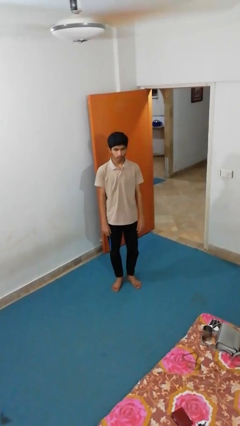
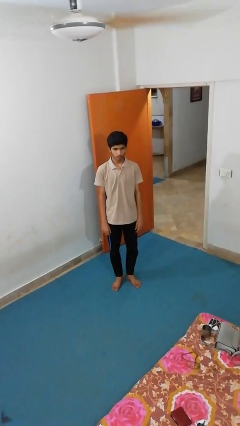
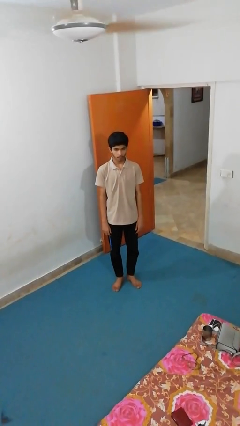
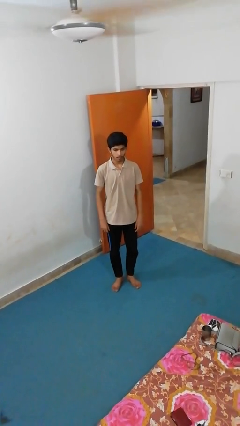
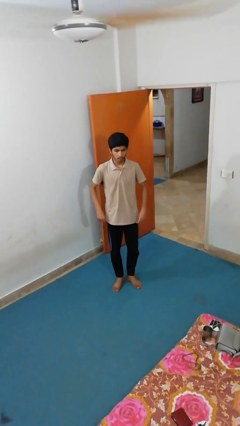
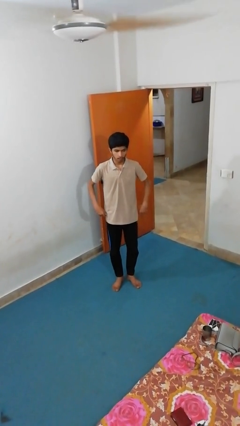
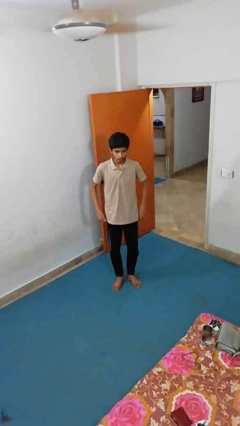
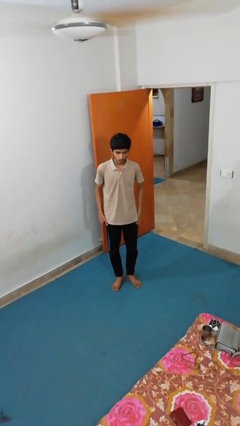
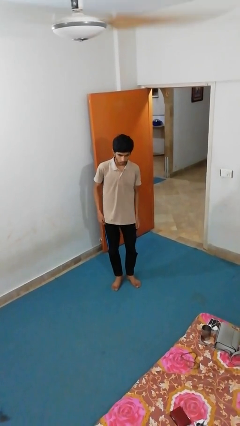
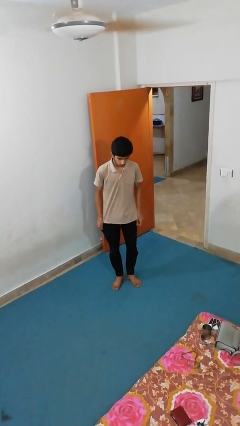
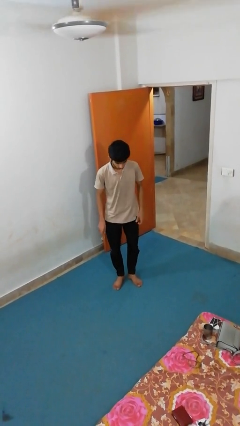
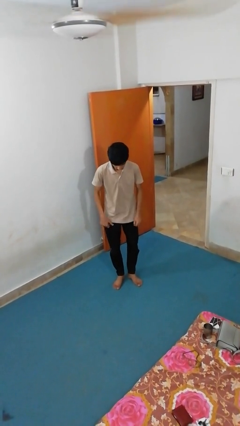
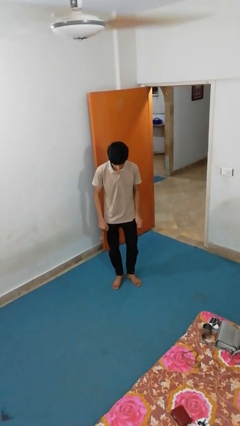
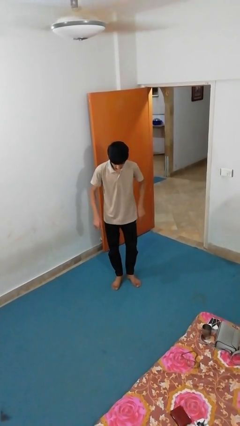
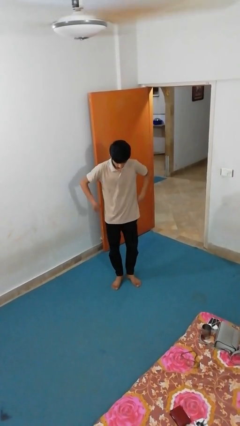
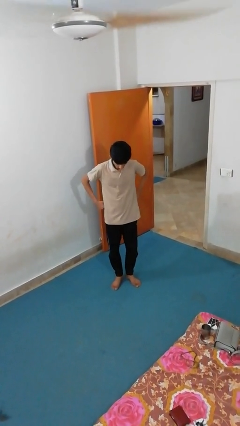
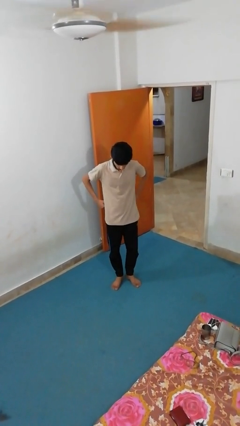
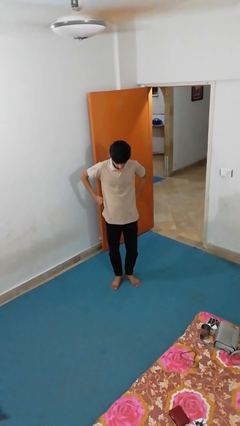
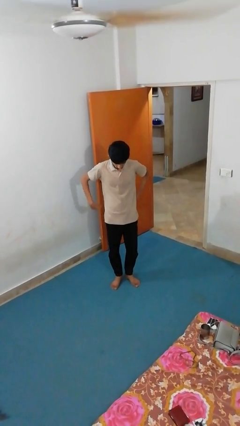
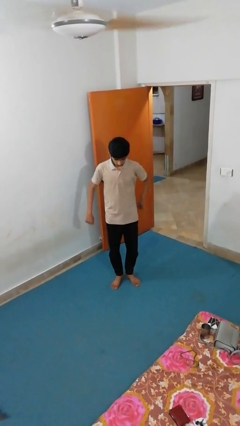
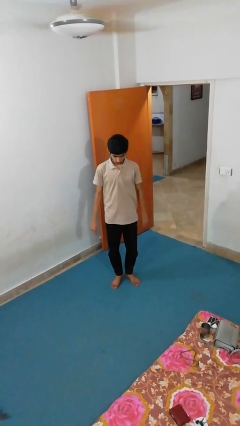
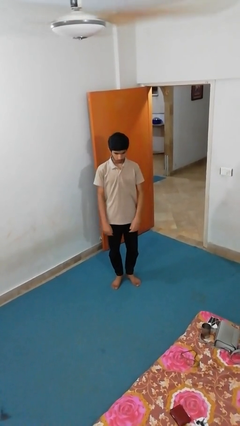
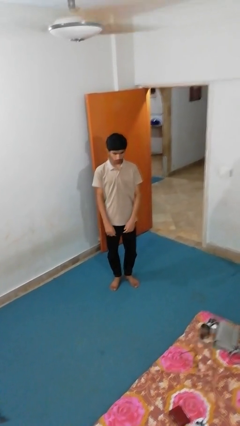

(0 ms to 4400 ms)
person hikes up pants

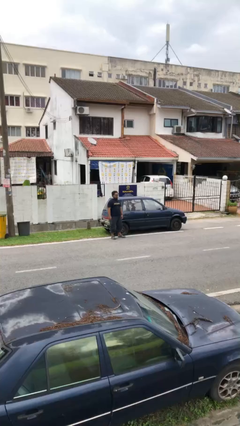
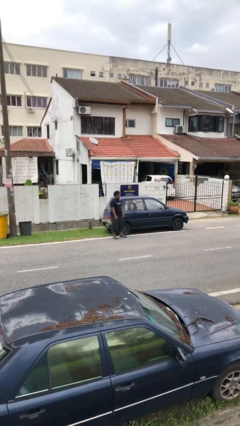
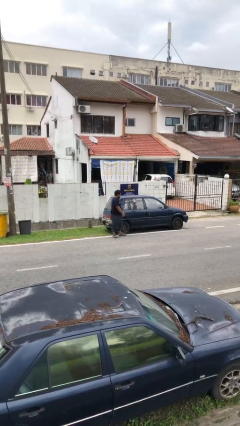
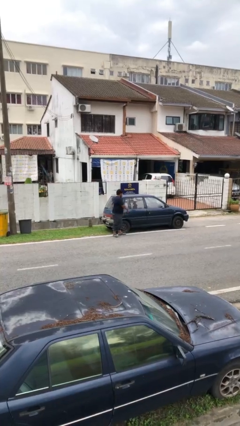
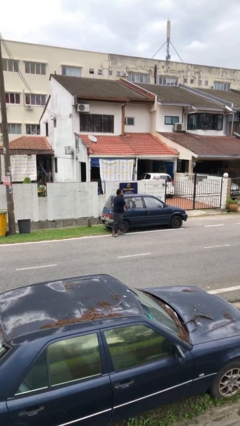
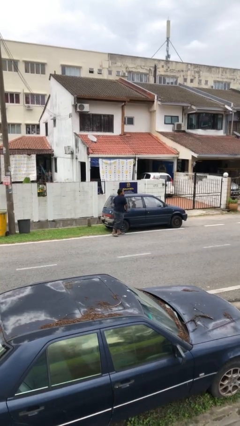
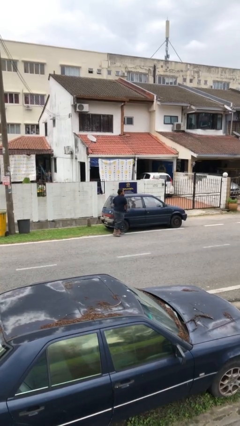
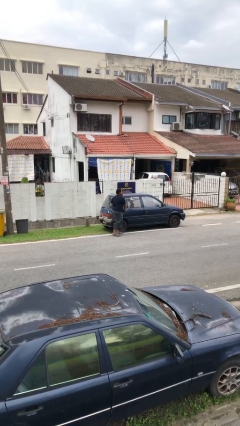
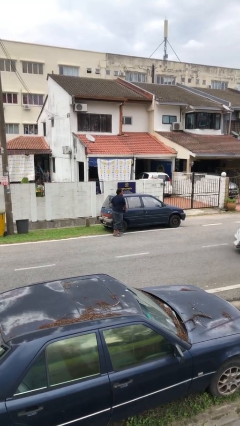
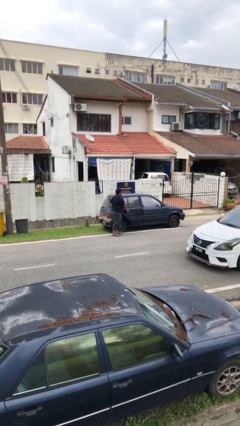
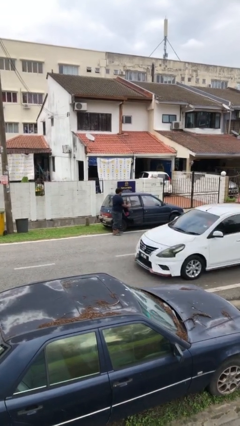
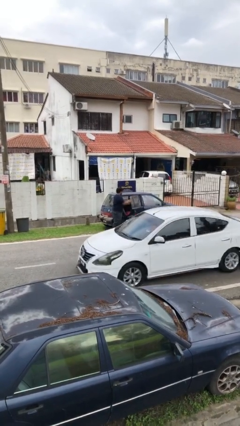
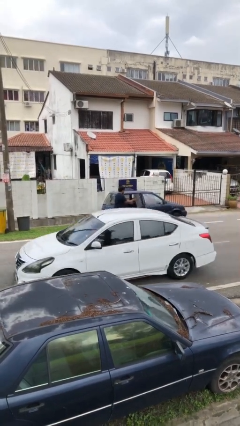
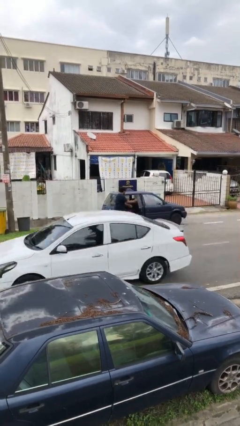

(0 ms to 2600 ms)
person opens car door

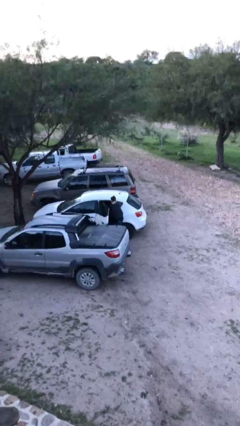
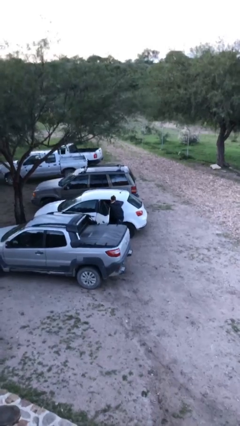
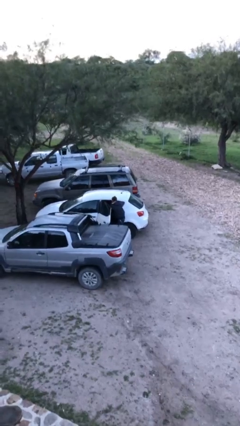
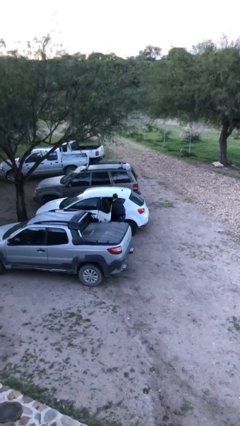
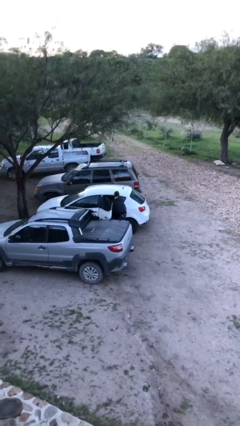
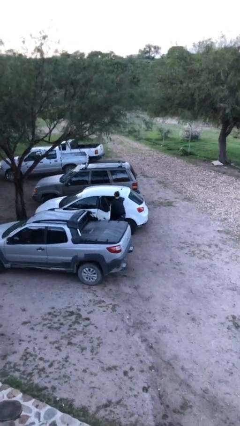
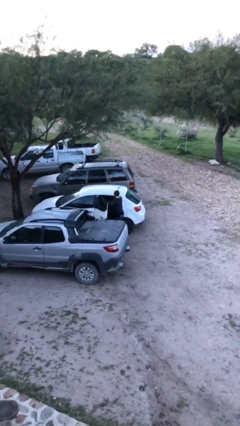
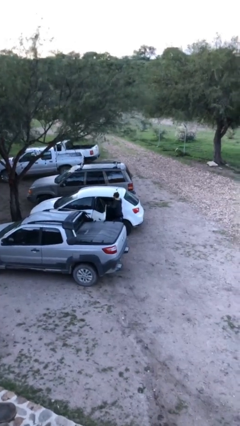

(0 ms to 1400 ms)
person unloads car

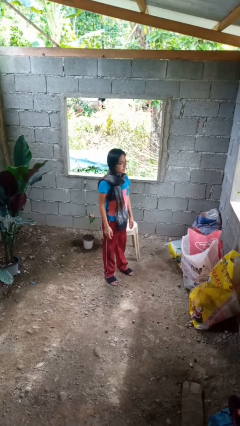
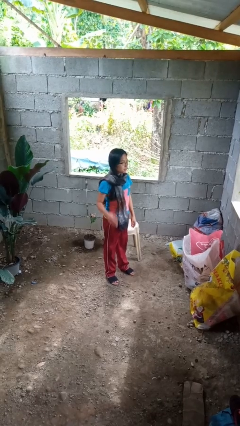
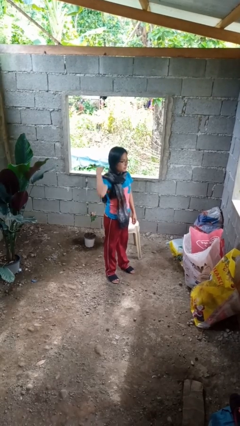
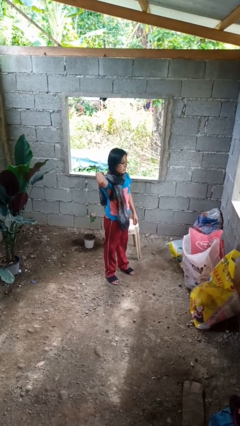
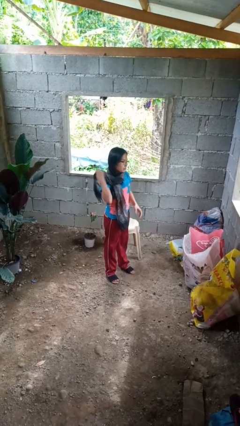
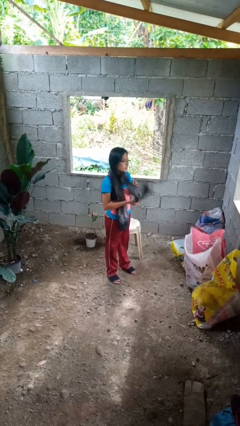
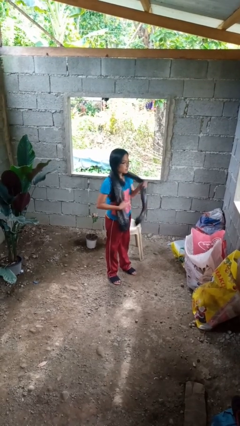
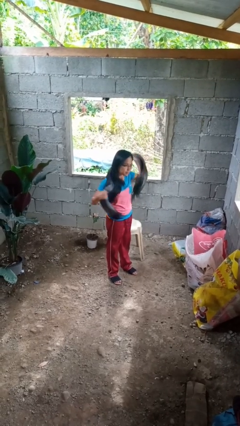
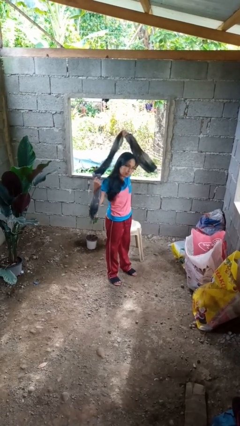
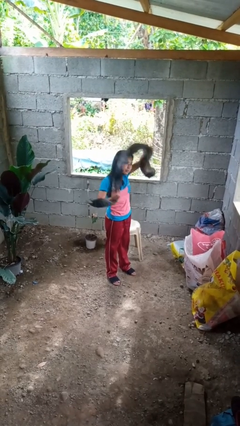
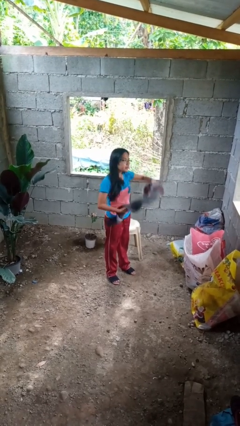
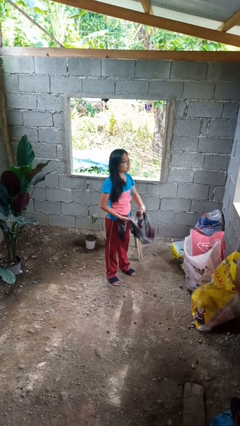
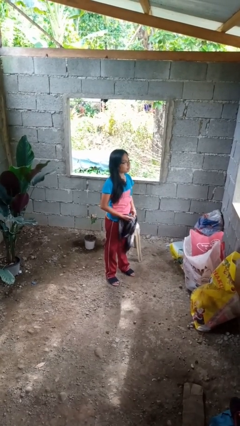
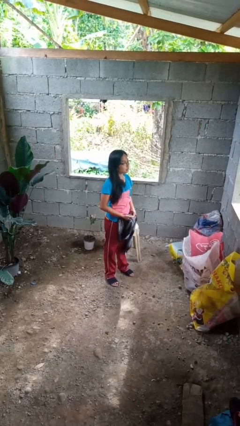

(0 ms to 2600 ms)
person takes off scarf

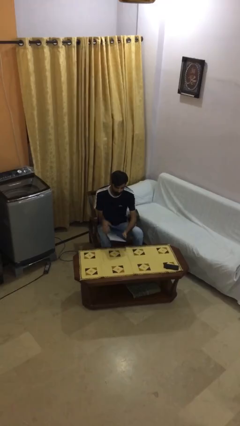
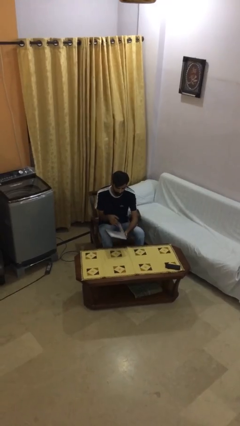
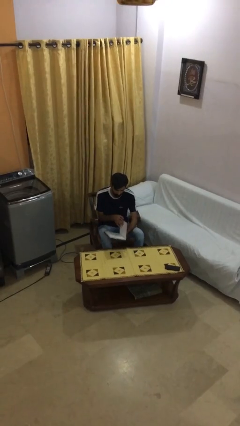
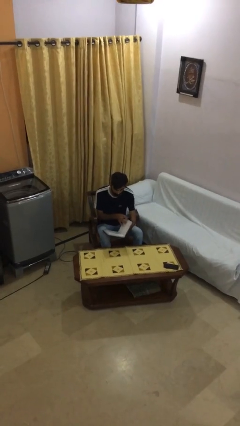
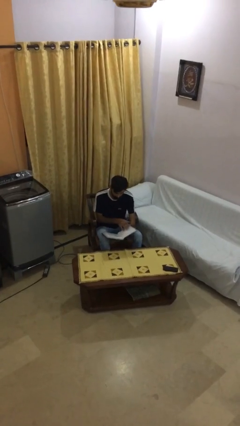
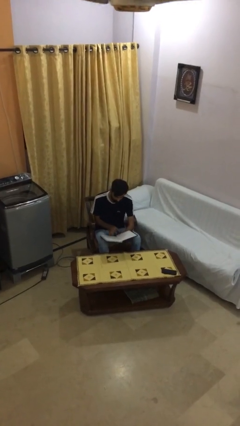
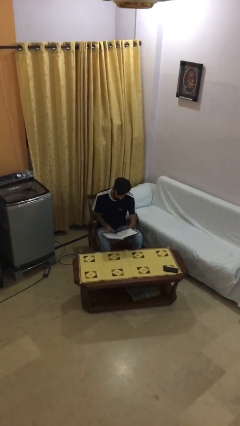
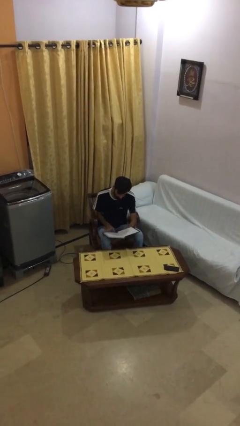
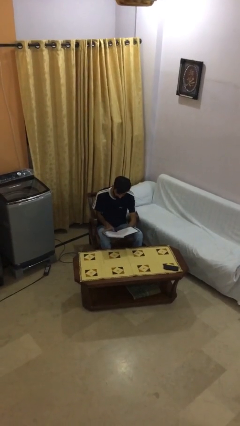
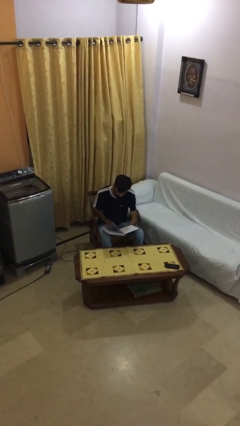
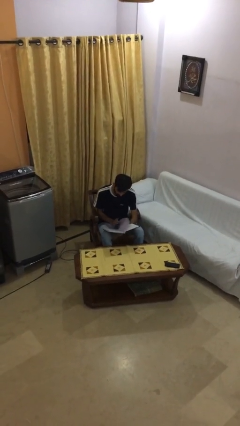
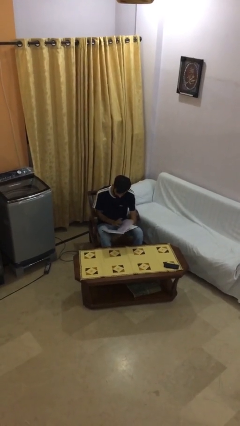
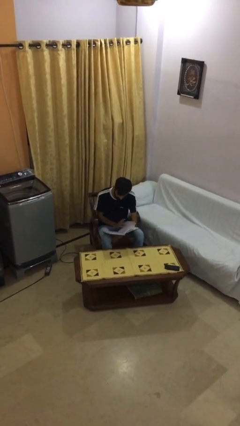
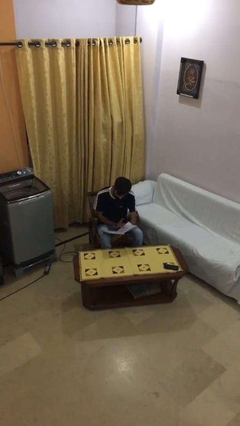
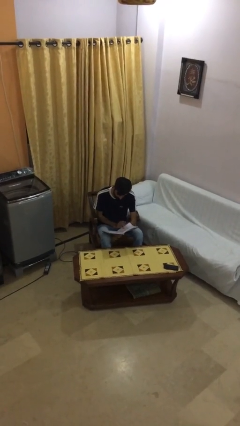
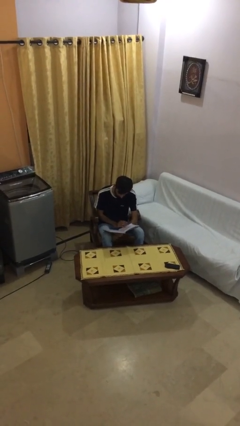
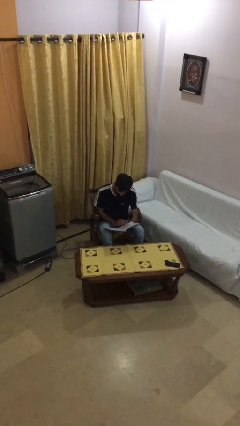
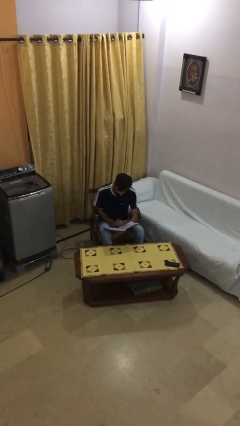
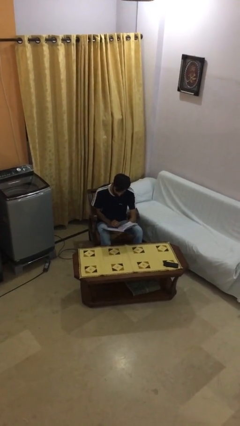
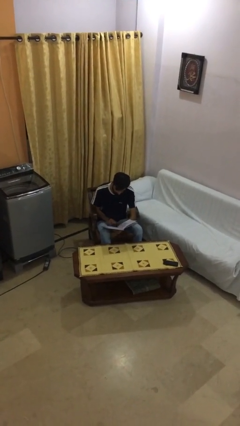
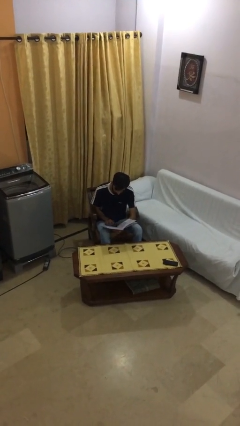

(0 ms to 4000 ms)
person reads document

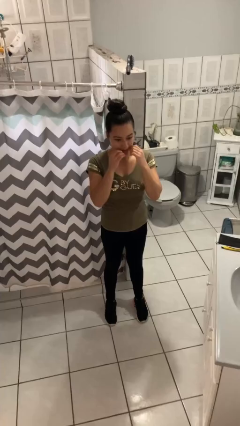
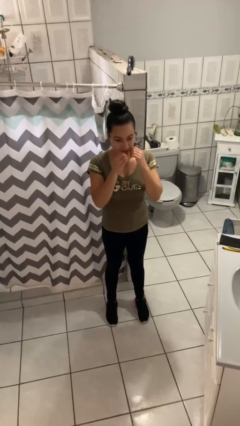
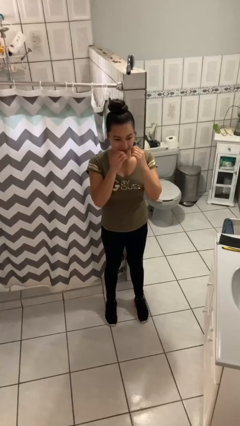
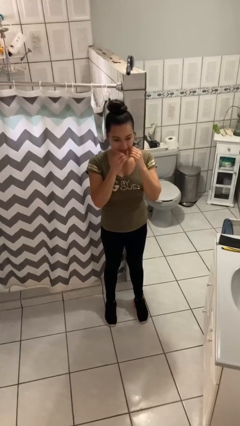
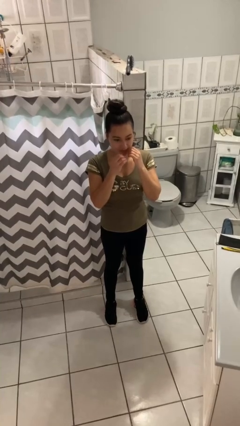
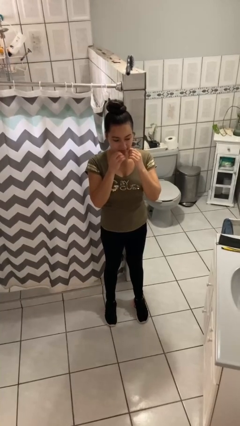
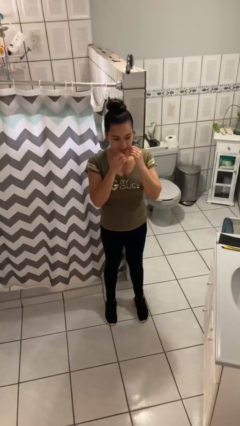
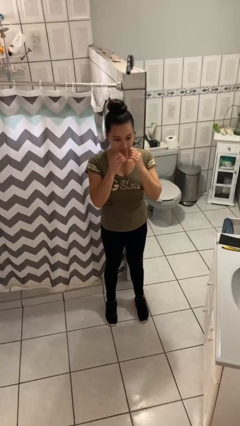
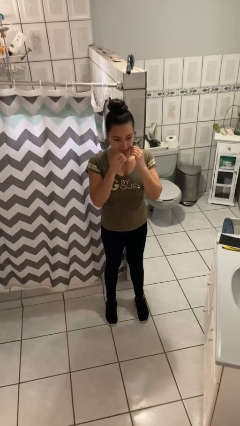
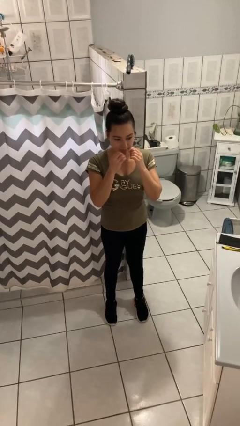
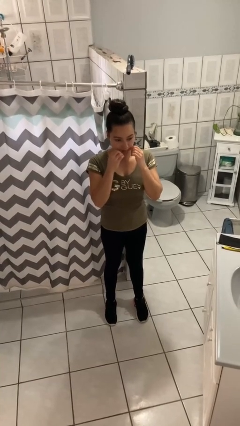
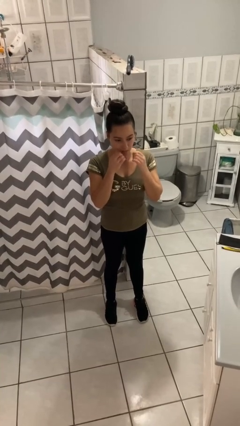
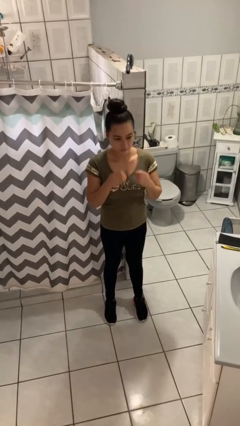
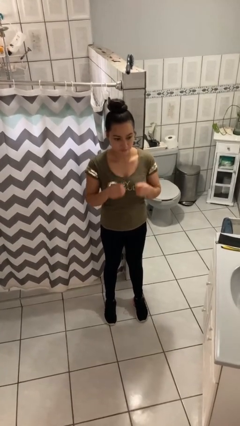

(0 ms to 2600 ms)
person flosses
